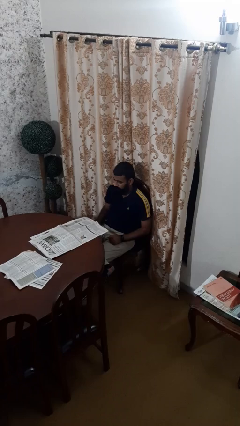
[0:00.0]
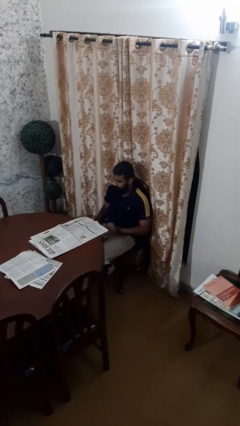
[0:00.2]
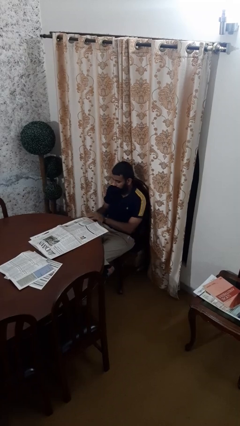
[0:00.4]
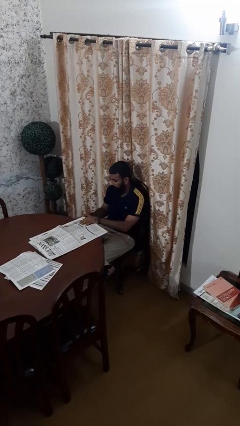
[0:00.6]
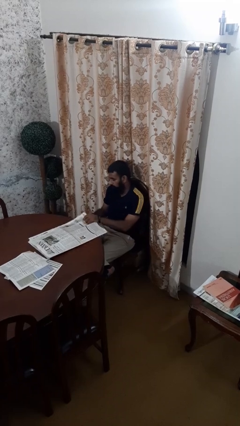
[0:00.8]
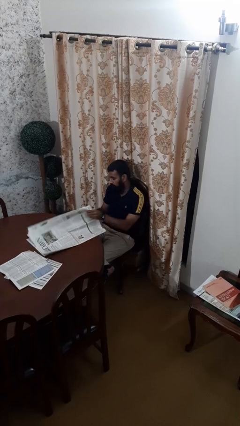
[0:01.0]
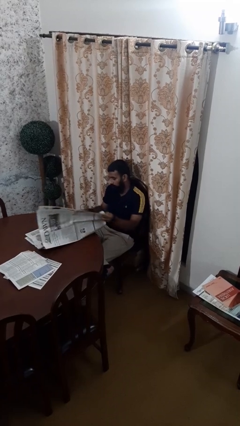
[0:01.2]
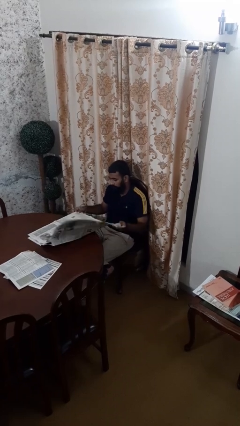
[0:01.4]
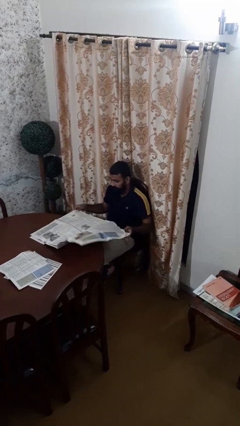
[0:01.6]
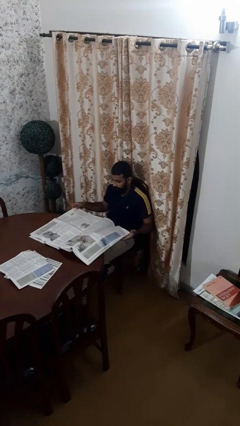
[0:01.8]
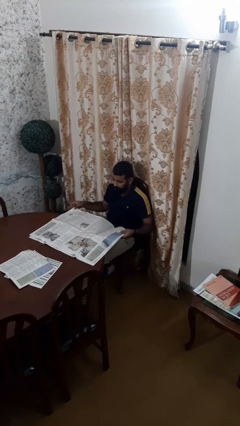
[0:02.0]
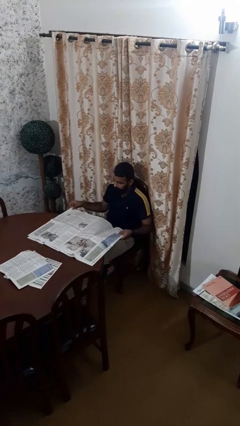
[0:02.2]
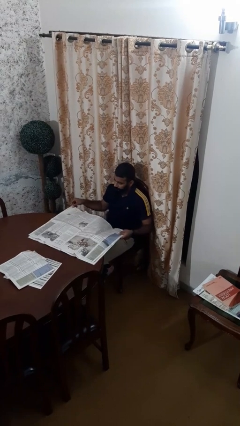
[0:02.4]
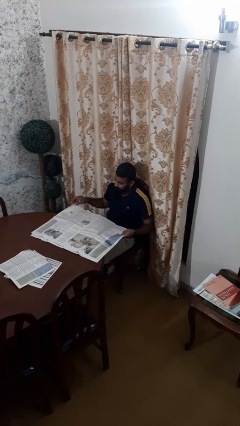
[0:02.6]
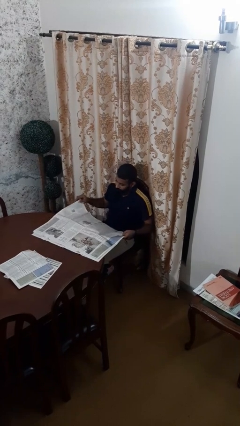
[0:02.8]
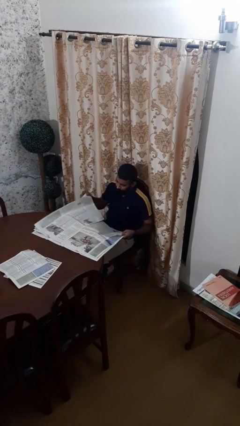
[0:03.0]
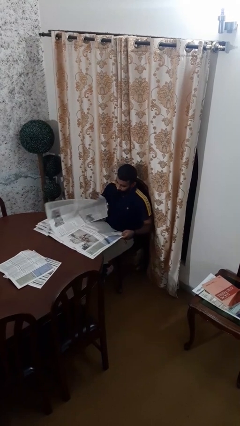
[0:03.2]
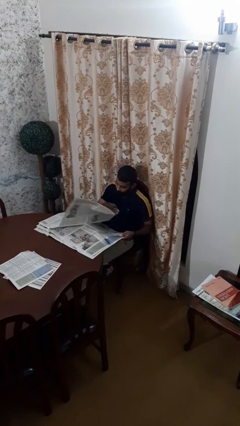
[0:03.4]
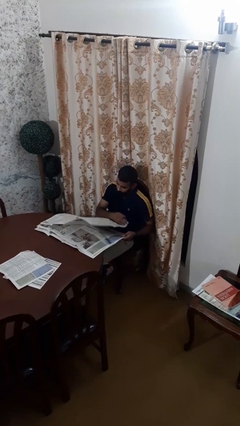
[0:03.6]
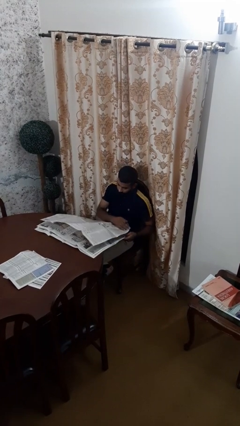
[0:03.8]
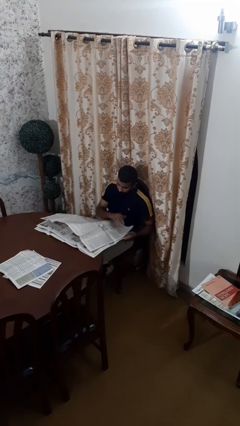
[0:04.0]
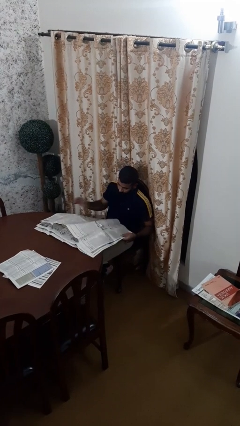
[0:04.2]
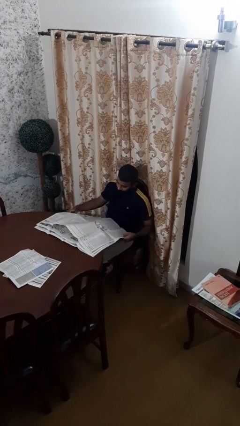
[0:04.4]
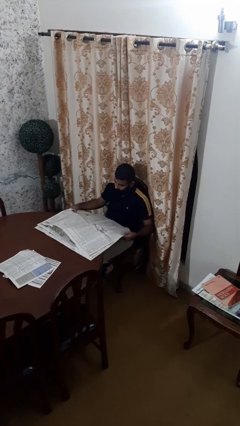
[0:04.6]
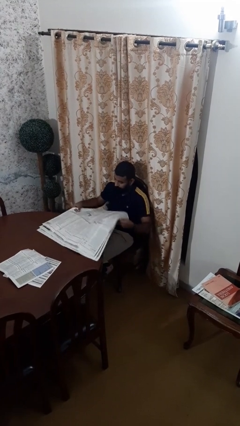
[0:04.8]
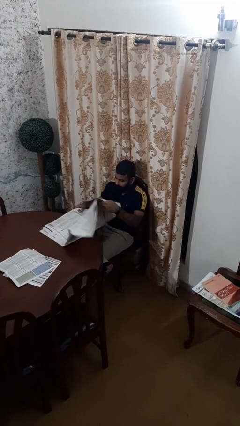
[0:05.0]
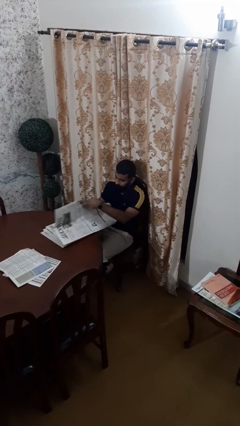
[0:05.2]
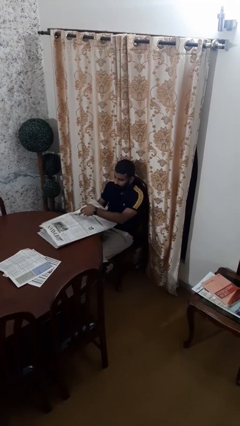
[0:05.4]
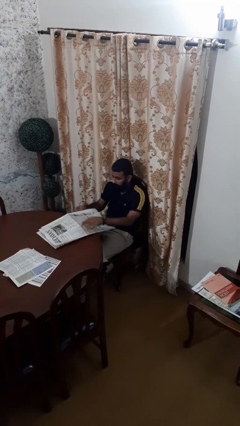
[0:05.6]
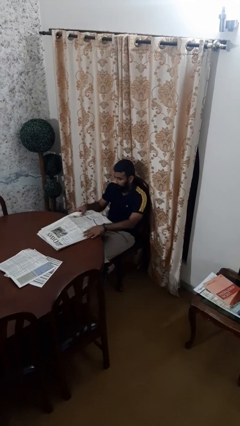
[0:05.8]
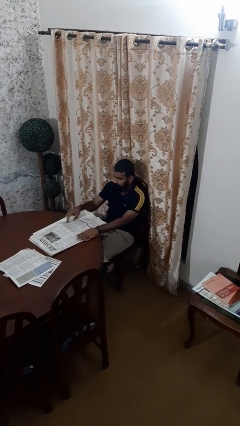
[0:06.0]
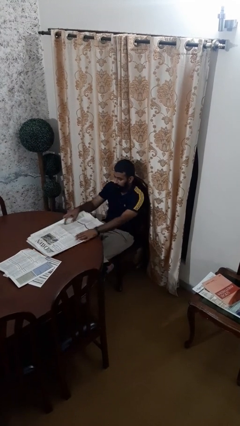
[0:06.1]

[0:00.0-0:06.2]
person reads newspaper

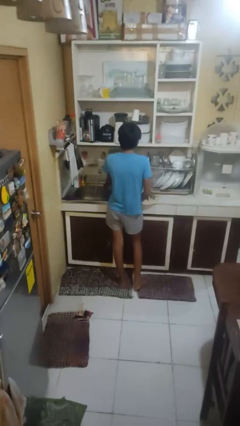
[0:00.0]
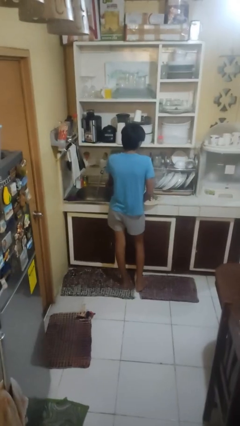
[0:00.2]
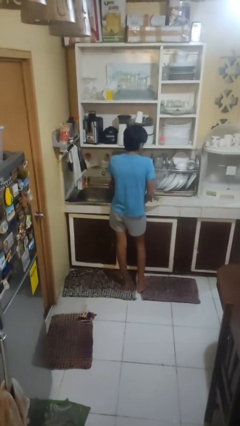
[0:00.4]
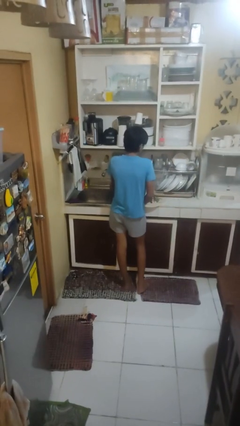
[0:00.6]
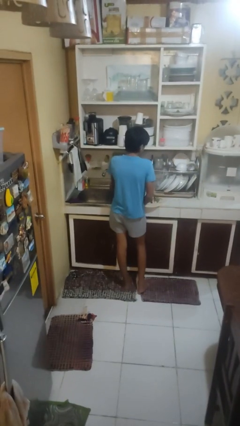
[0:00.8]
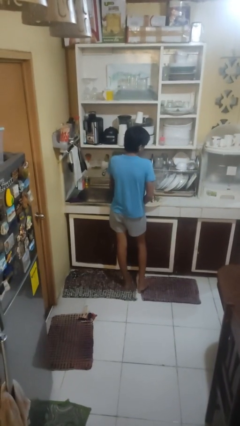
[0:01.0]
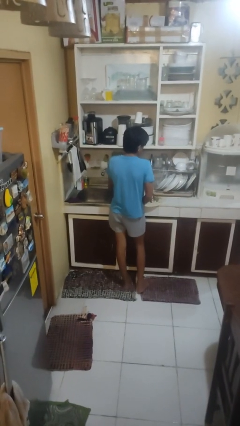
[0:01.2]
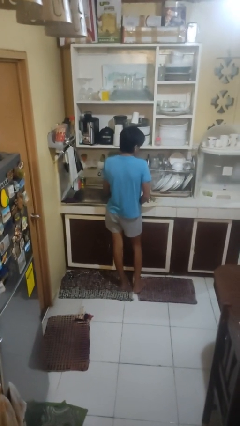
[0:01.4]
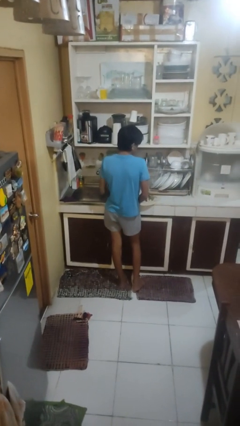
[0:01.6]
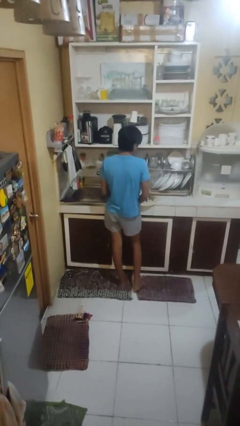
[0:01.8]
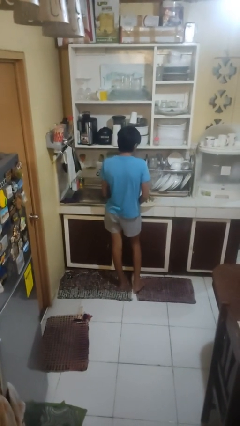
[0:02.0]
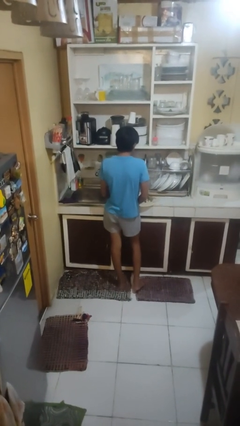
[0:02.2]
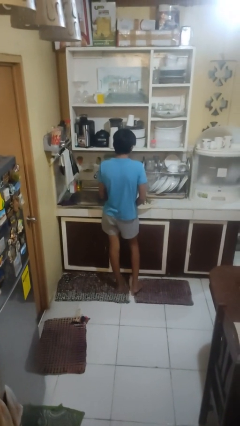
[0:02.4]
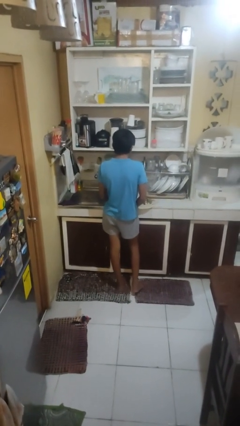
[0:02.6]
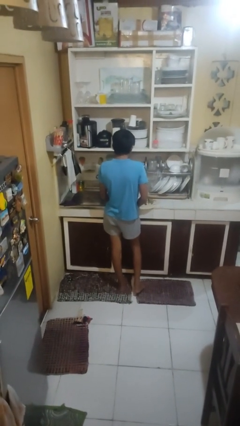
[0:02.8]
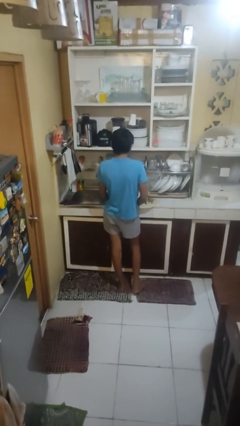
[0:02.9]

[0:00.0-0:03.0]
person closes dishwasher

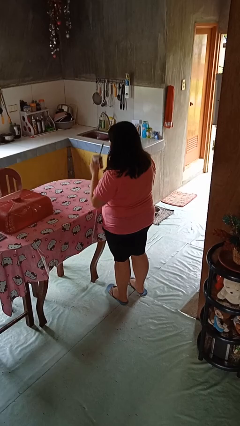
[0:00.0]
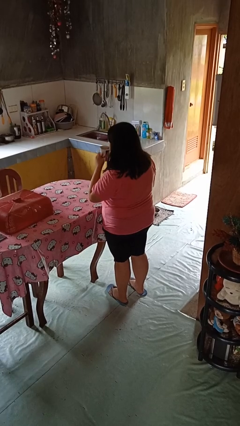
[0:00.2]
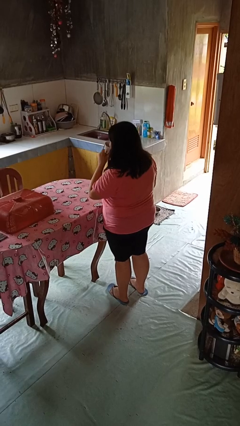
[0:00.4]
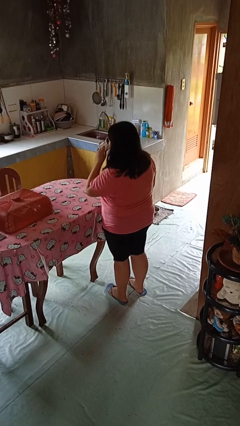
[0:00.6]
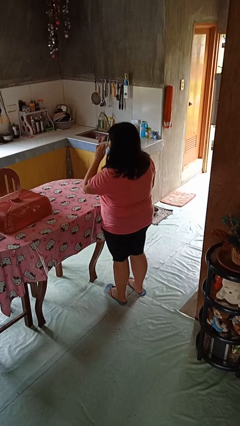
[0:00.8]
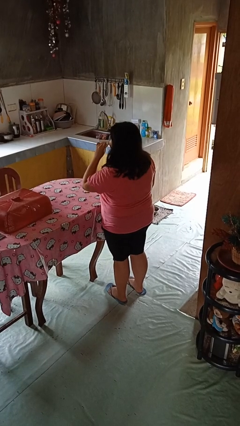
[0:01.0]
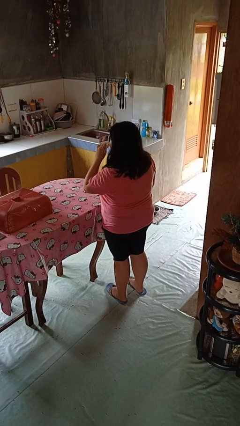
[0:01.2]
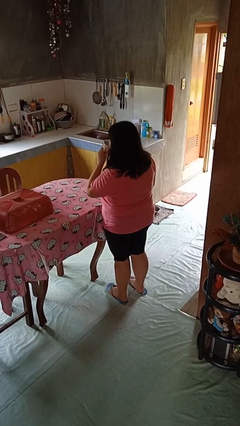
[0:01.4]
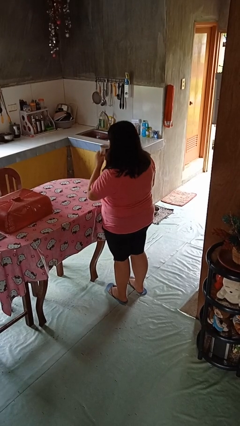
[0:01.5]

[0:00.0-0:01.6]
person drinks from mug

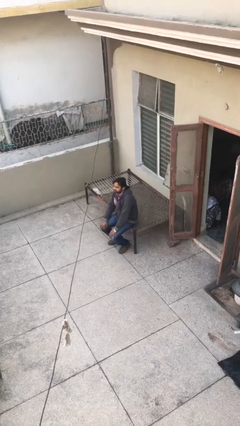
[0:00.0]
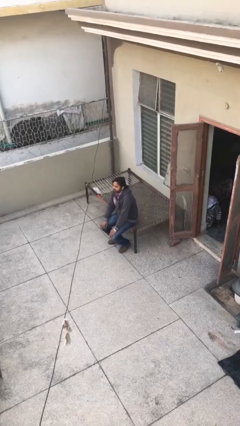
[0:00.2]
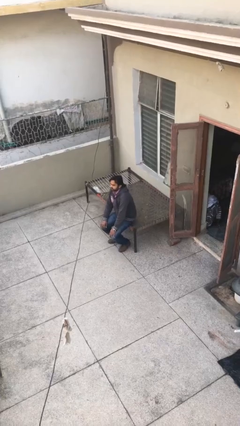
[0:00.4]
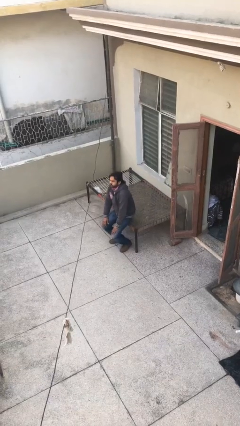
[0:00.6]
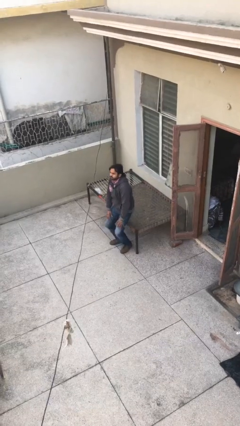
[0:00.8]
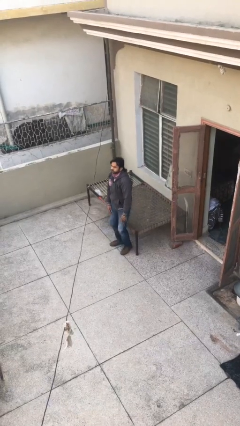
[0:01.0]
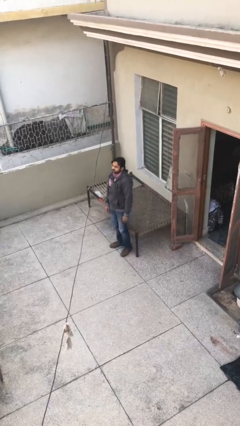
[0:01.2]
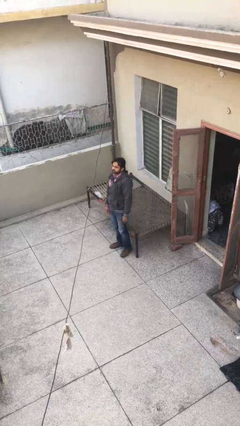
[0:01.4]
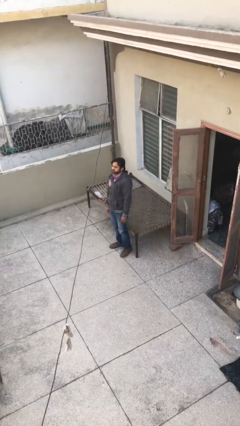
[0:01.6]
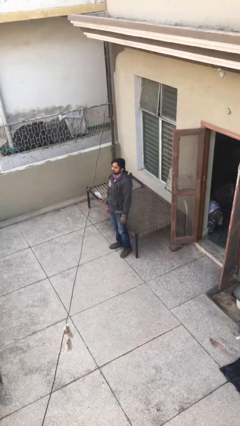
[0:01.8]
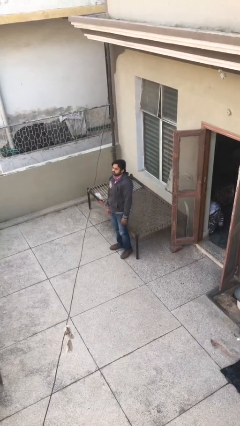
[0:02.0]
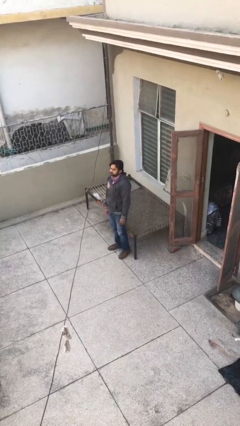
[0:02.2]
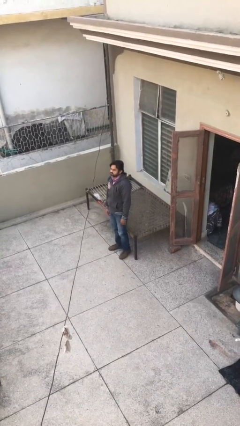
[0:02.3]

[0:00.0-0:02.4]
person stands up

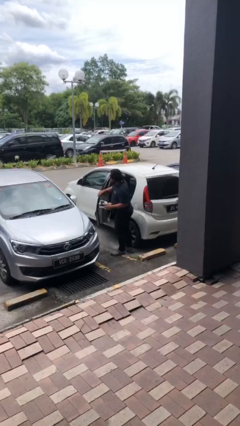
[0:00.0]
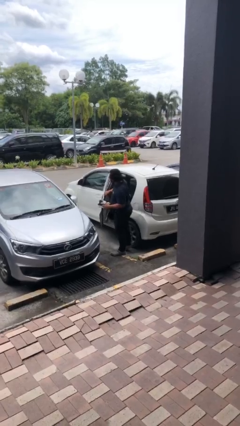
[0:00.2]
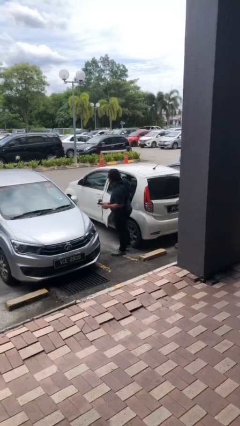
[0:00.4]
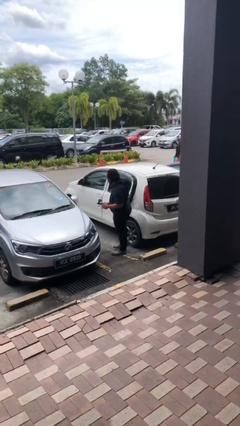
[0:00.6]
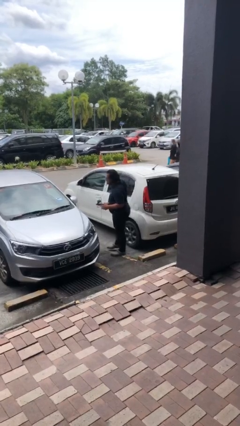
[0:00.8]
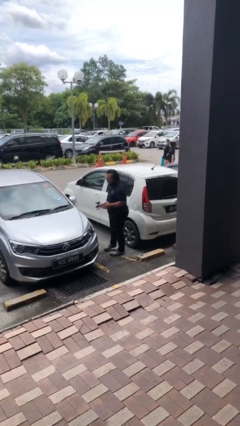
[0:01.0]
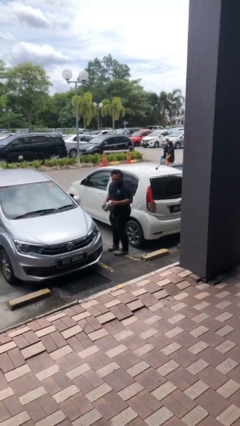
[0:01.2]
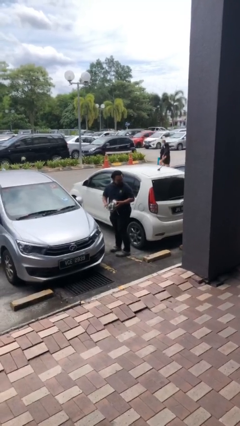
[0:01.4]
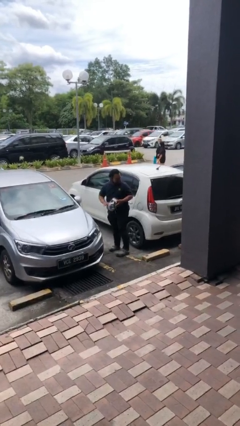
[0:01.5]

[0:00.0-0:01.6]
person closes car door

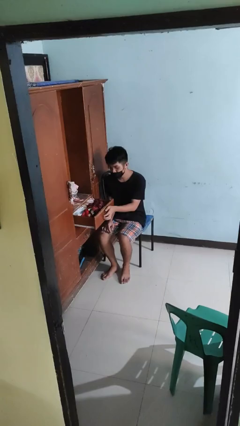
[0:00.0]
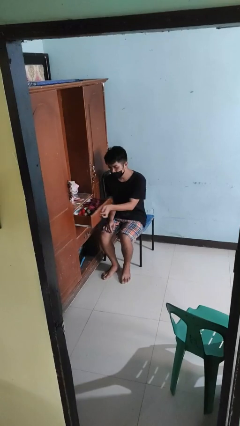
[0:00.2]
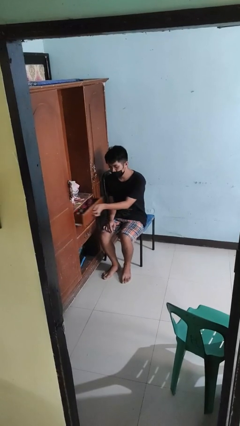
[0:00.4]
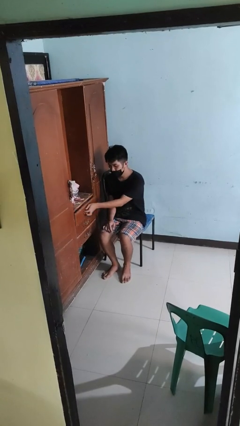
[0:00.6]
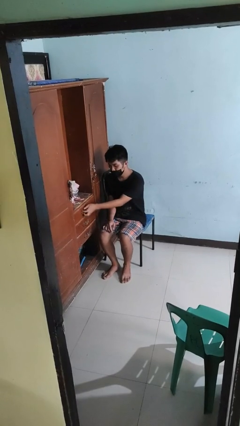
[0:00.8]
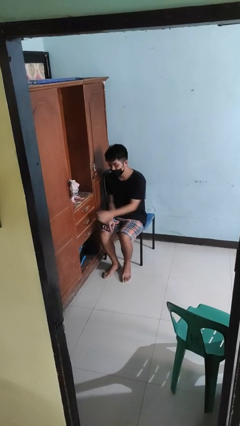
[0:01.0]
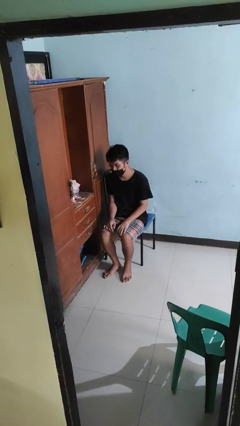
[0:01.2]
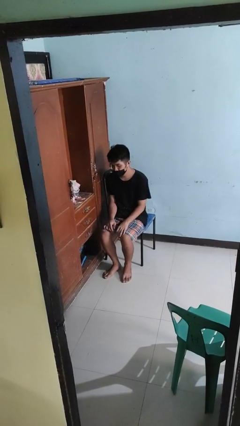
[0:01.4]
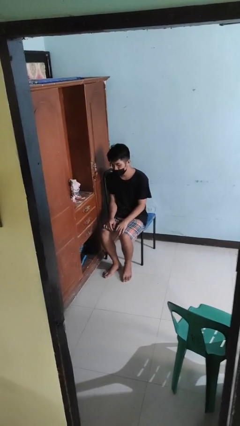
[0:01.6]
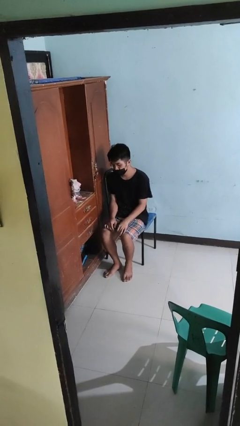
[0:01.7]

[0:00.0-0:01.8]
person closes dresser drawer

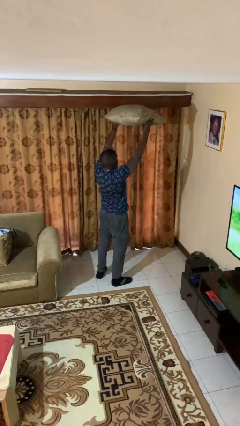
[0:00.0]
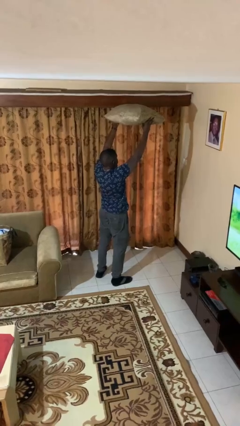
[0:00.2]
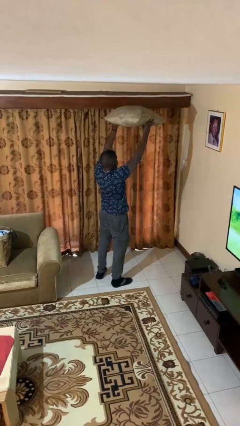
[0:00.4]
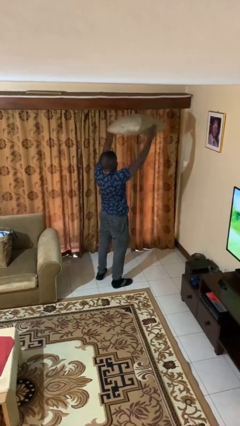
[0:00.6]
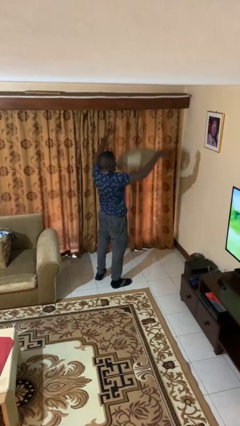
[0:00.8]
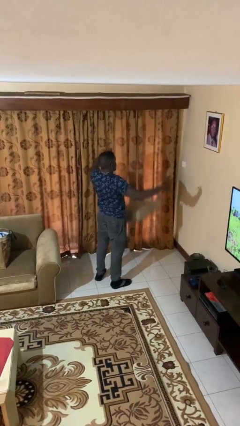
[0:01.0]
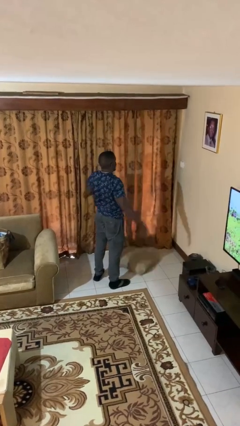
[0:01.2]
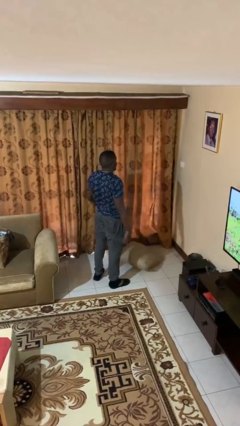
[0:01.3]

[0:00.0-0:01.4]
person drops object
